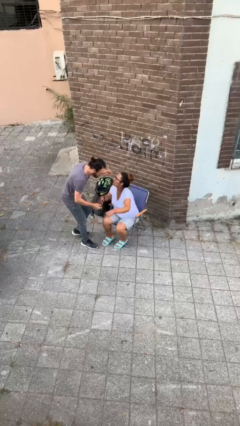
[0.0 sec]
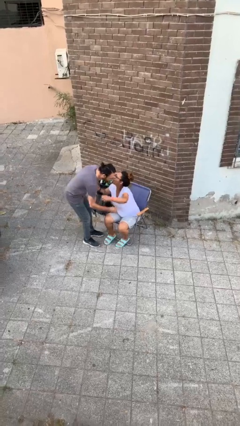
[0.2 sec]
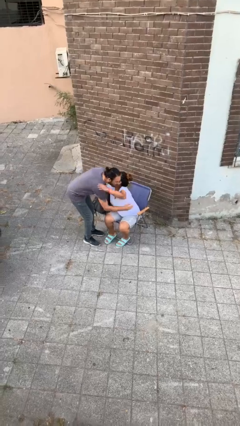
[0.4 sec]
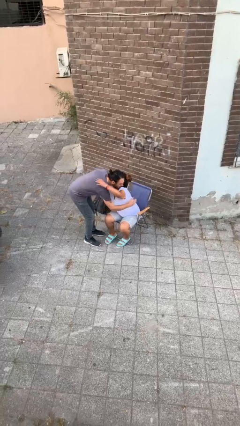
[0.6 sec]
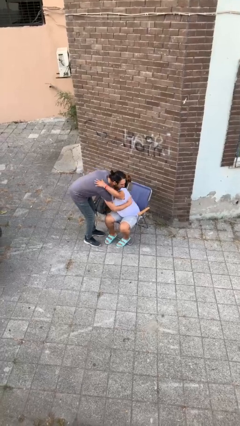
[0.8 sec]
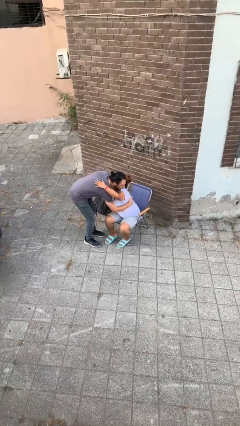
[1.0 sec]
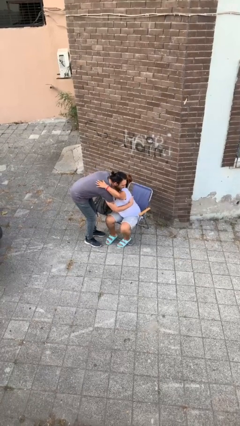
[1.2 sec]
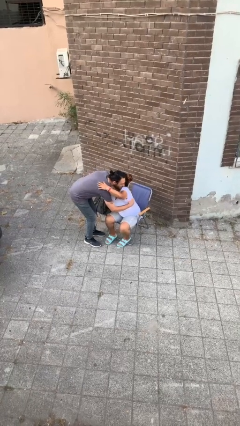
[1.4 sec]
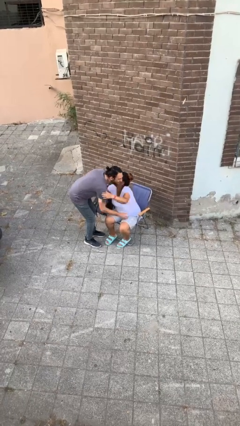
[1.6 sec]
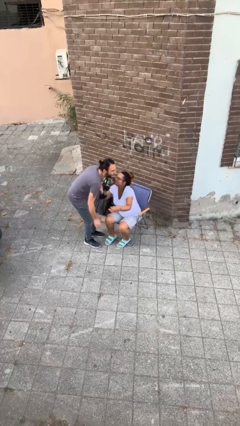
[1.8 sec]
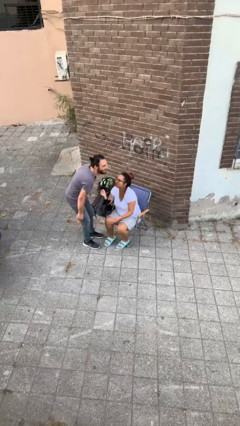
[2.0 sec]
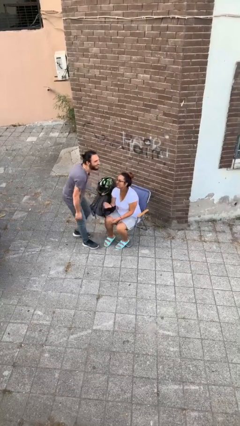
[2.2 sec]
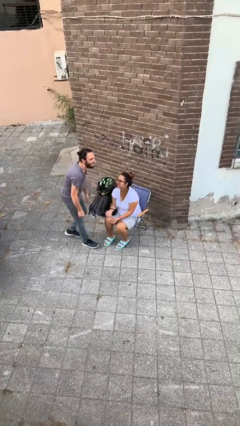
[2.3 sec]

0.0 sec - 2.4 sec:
person embraces person

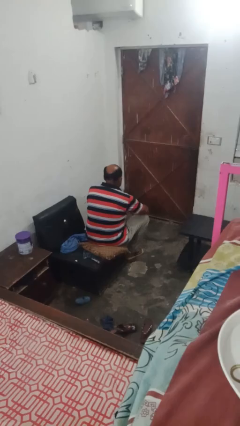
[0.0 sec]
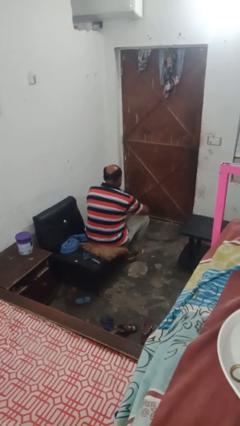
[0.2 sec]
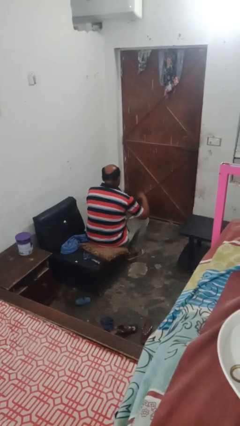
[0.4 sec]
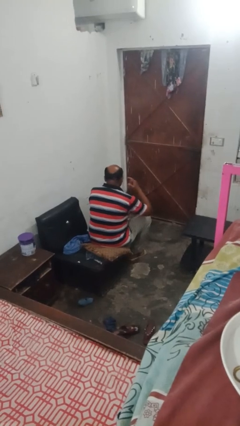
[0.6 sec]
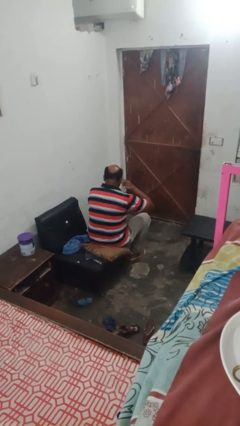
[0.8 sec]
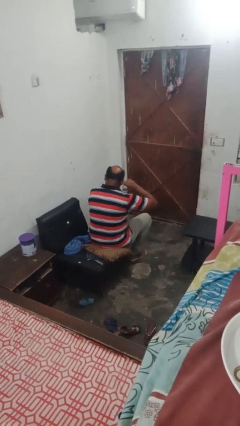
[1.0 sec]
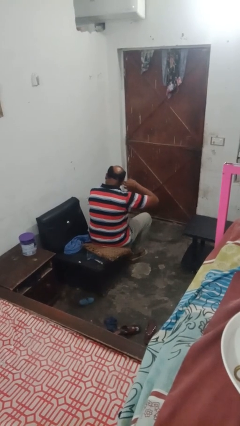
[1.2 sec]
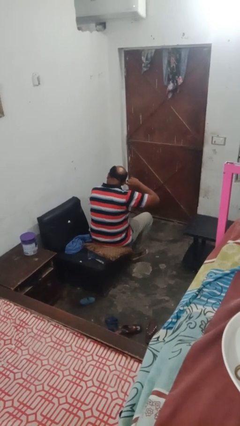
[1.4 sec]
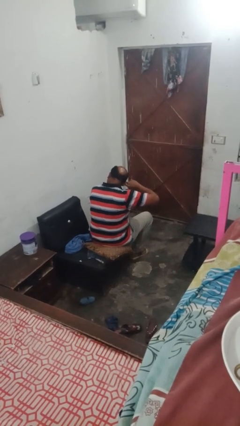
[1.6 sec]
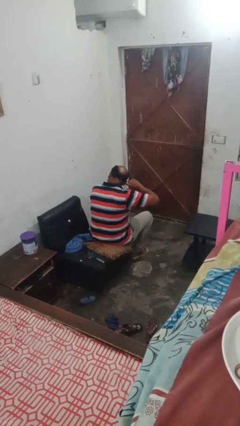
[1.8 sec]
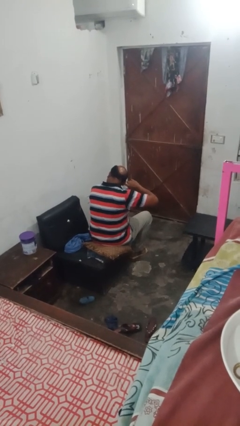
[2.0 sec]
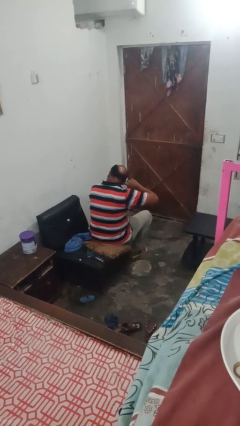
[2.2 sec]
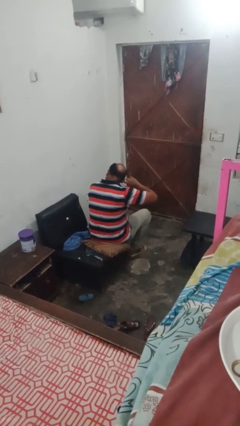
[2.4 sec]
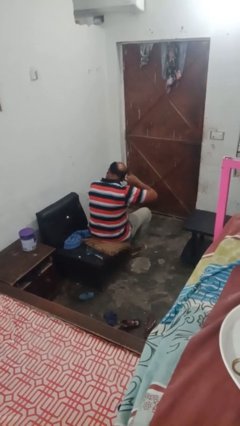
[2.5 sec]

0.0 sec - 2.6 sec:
person puts fingers in ear

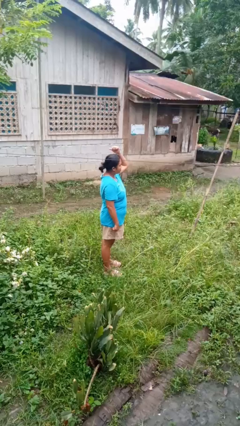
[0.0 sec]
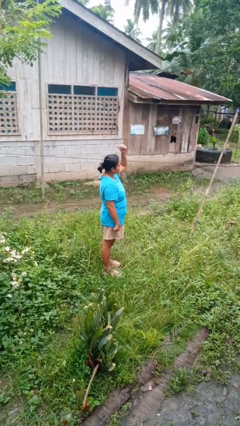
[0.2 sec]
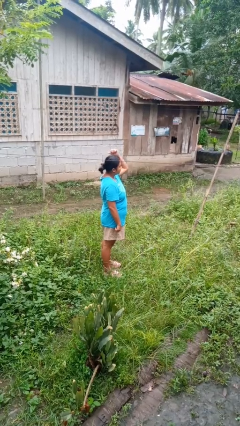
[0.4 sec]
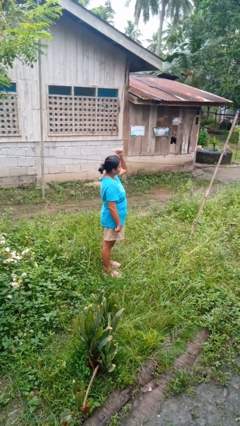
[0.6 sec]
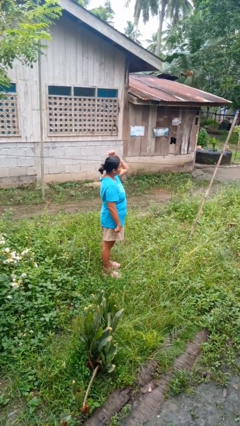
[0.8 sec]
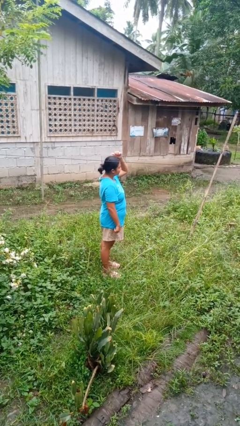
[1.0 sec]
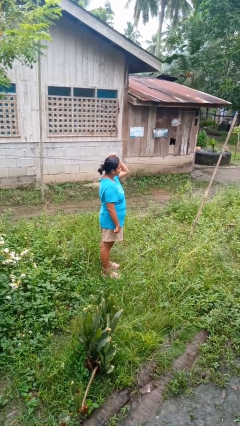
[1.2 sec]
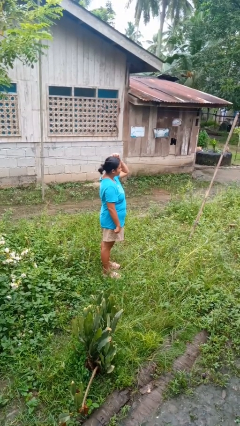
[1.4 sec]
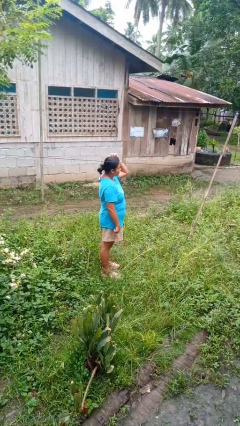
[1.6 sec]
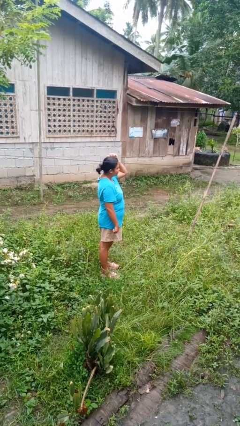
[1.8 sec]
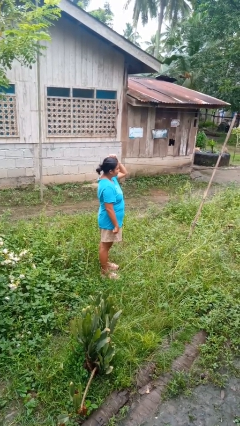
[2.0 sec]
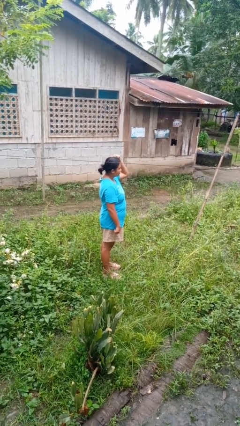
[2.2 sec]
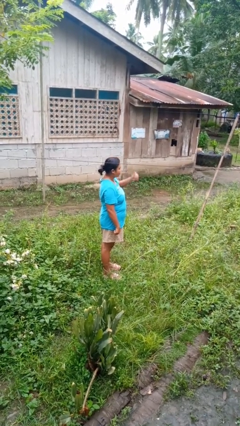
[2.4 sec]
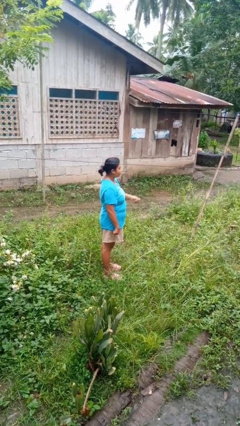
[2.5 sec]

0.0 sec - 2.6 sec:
person gestures behind me

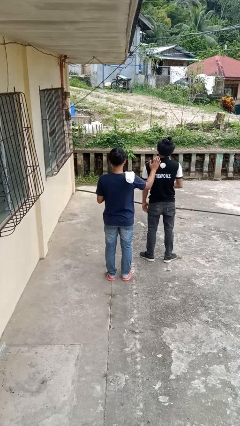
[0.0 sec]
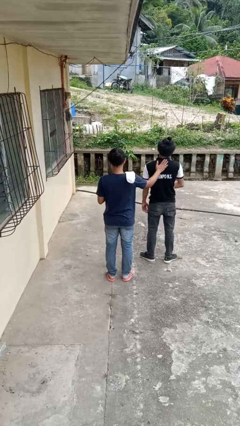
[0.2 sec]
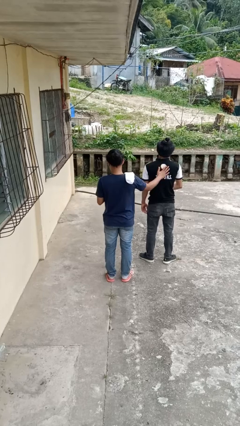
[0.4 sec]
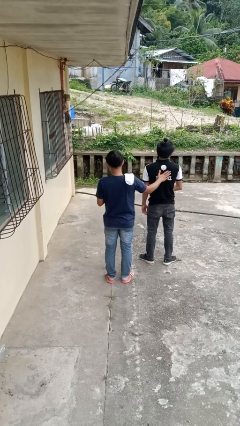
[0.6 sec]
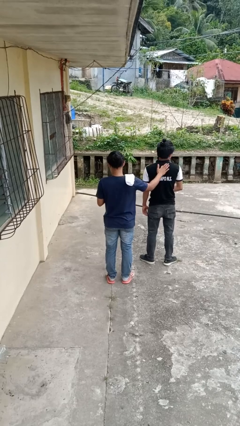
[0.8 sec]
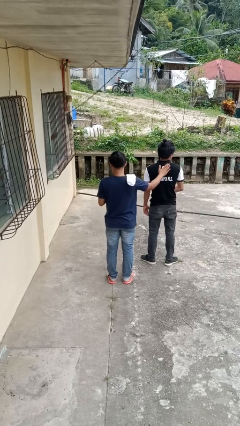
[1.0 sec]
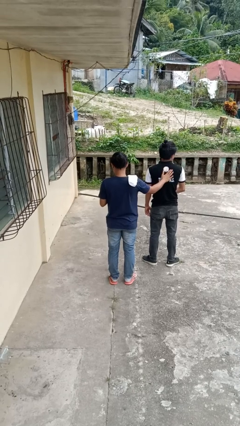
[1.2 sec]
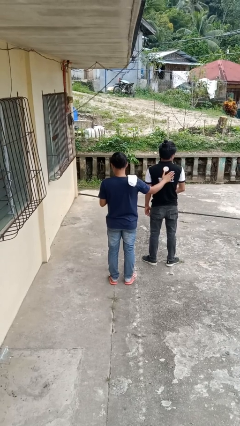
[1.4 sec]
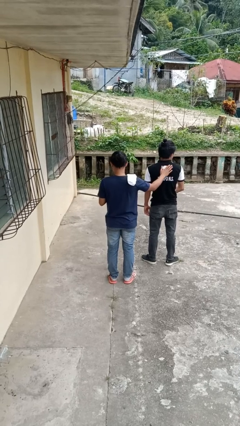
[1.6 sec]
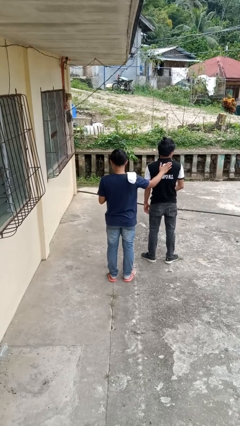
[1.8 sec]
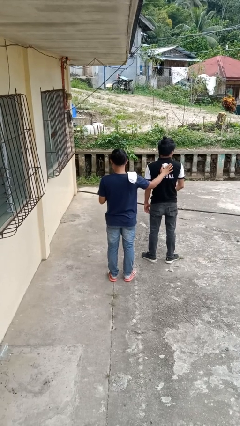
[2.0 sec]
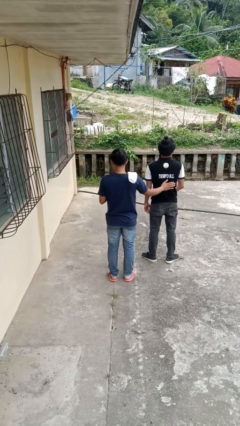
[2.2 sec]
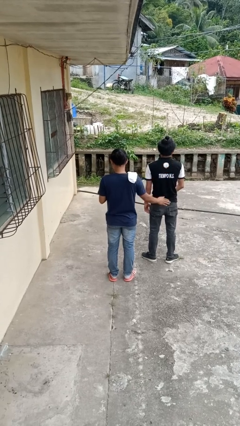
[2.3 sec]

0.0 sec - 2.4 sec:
person touches back of person

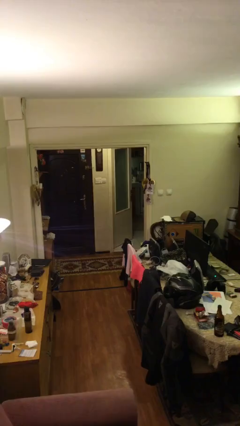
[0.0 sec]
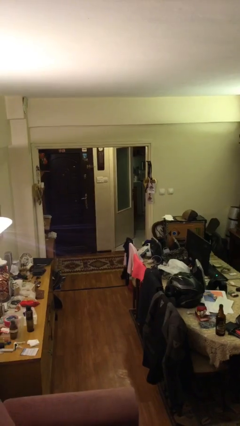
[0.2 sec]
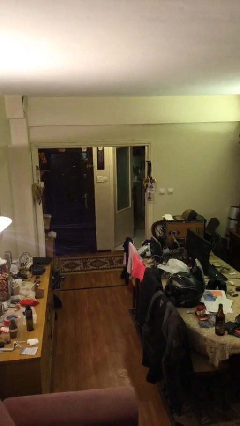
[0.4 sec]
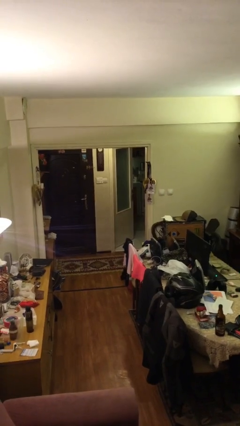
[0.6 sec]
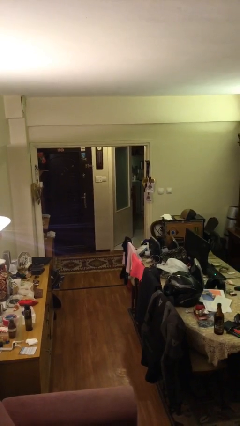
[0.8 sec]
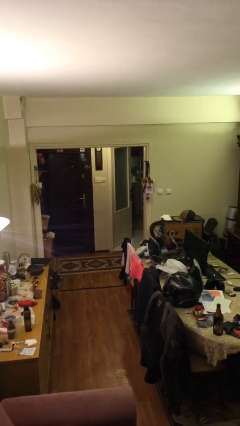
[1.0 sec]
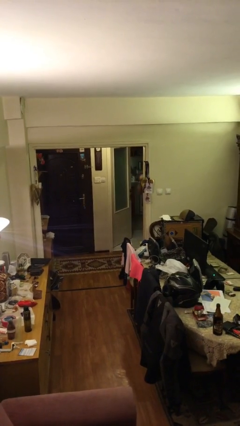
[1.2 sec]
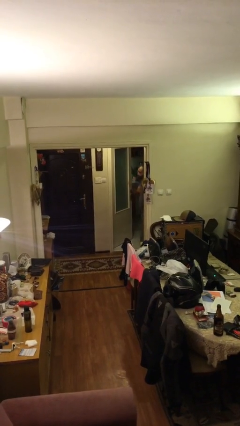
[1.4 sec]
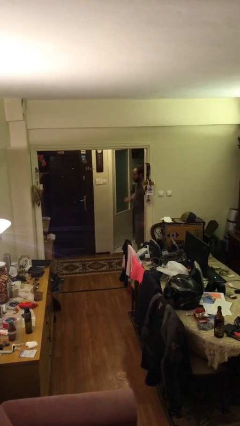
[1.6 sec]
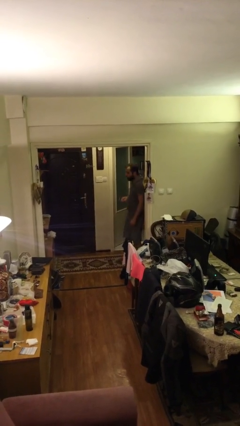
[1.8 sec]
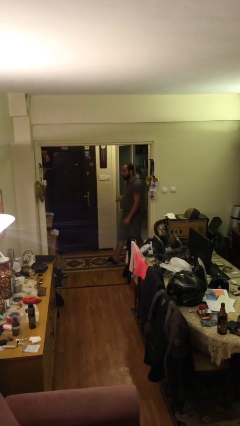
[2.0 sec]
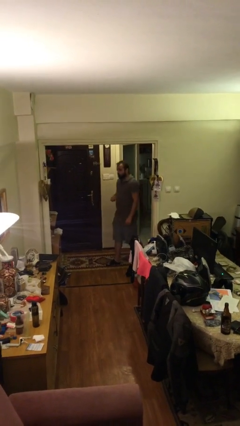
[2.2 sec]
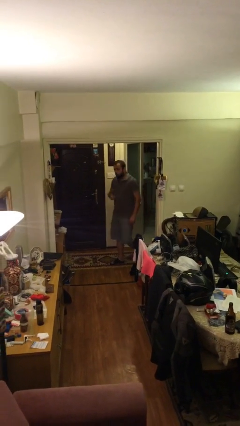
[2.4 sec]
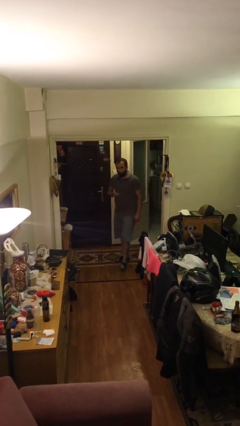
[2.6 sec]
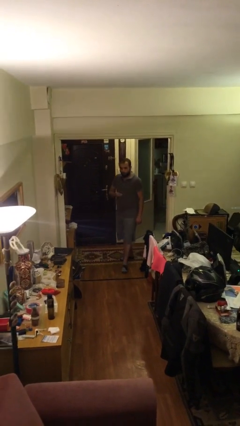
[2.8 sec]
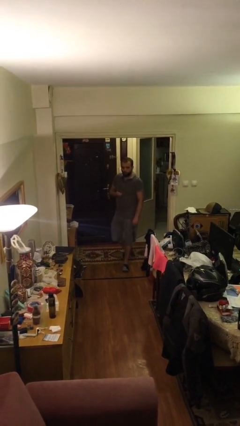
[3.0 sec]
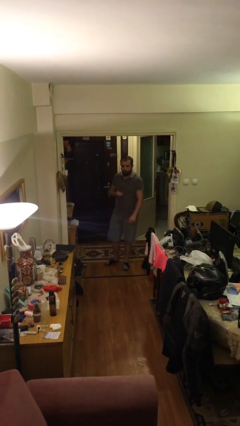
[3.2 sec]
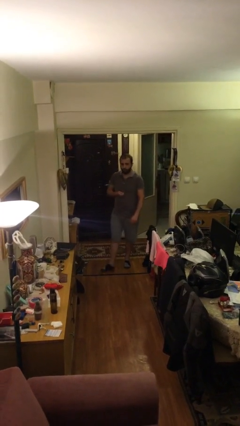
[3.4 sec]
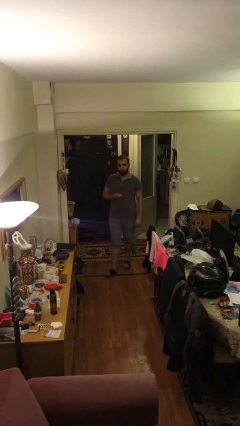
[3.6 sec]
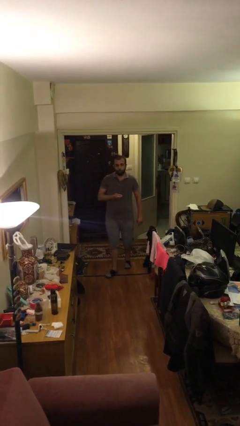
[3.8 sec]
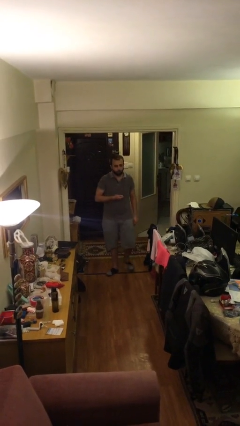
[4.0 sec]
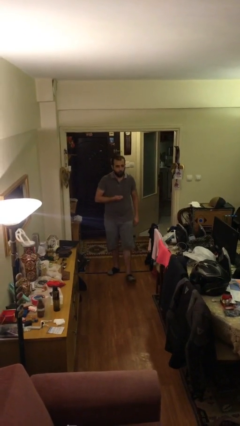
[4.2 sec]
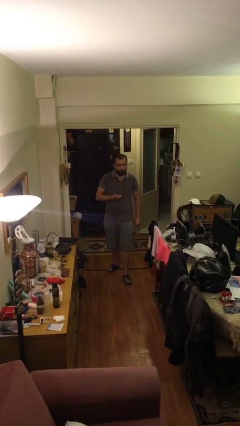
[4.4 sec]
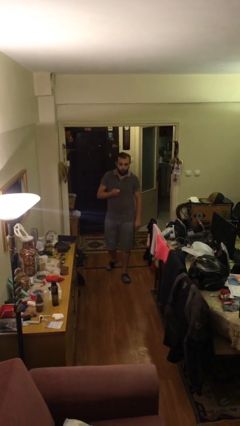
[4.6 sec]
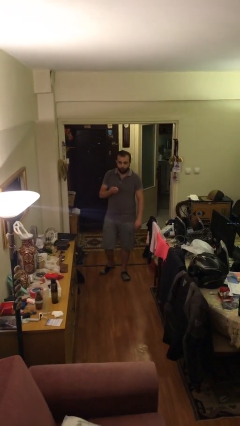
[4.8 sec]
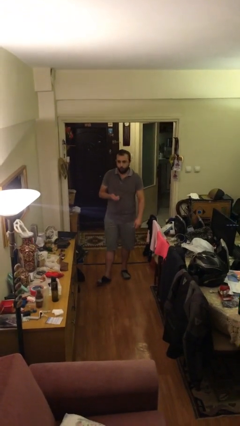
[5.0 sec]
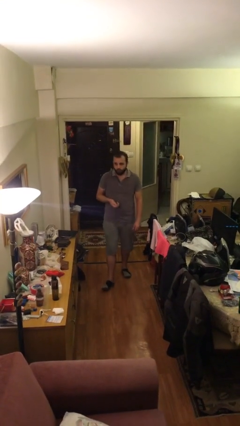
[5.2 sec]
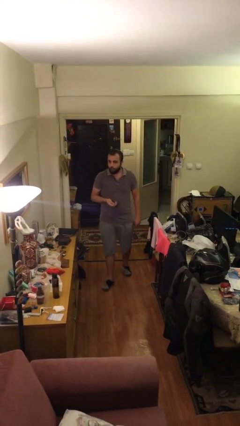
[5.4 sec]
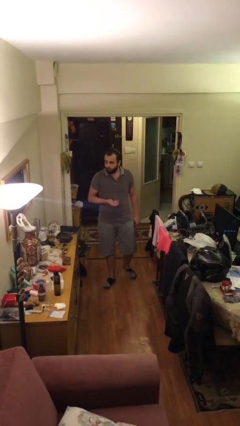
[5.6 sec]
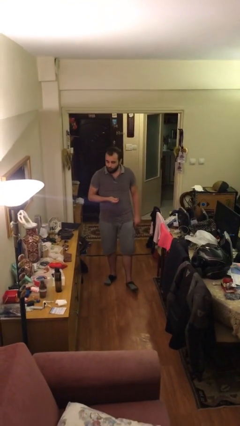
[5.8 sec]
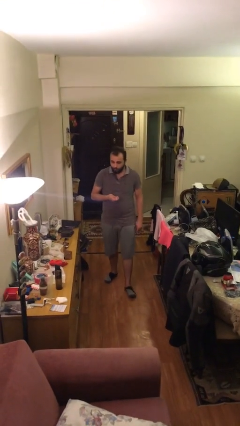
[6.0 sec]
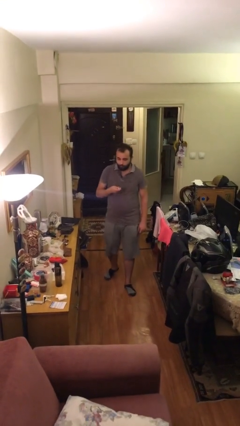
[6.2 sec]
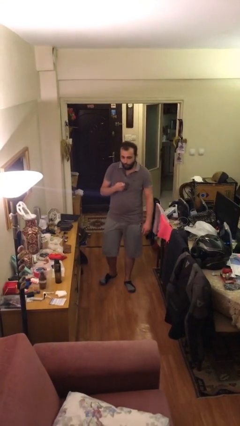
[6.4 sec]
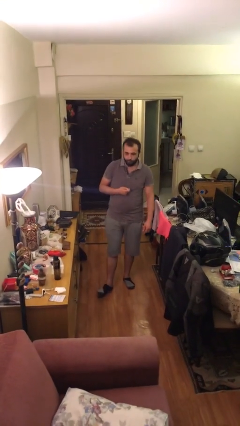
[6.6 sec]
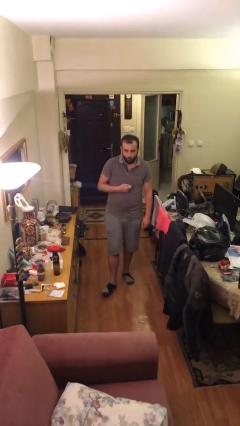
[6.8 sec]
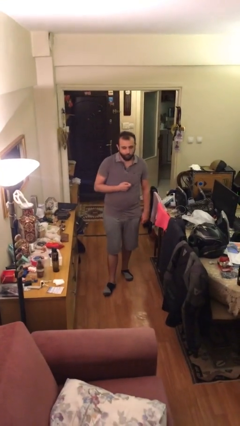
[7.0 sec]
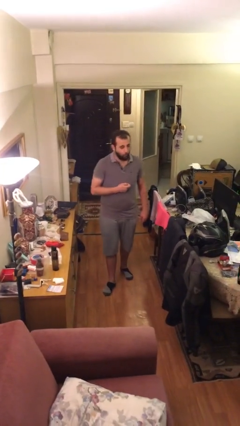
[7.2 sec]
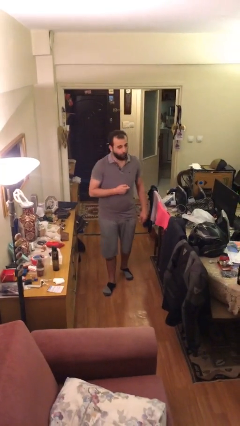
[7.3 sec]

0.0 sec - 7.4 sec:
person enters scene through structure

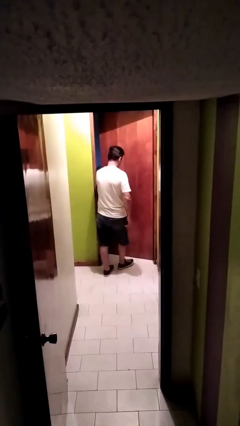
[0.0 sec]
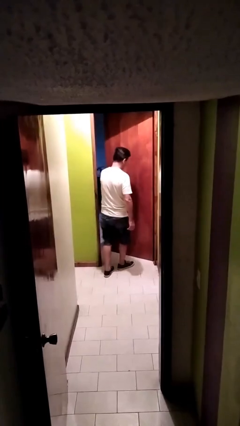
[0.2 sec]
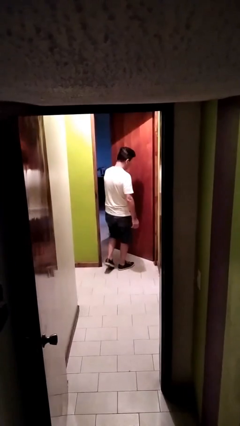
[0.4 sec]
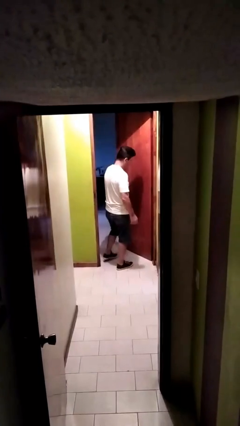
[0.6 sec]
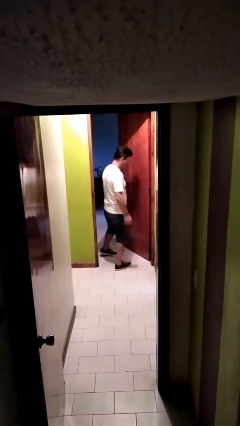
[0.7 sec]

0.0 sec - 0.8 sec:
person opens facility door
